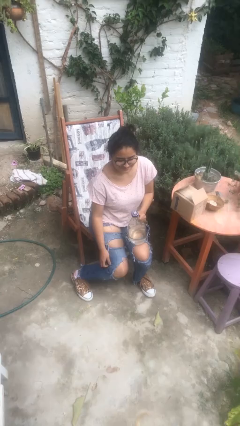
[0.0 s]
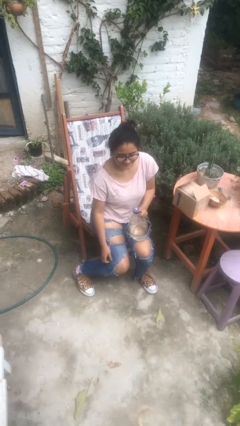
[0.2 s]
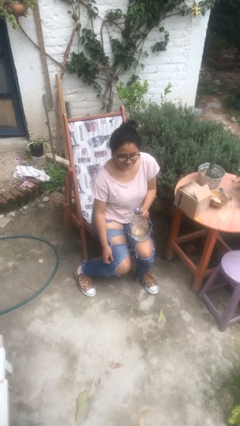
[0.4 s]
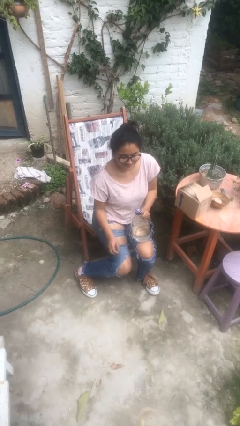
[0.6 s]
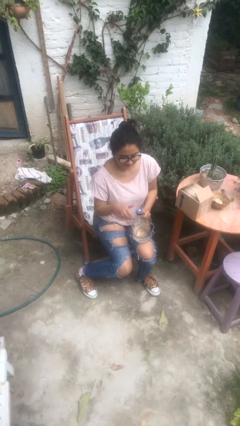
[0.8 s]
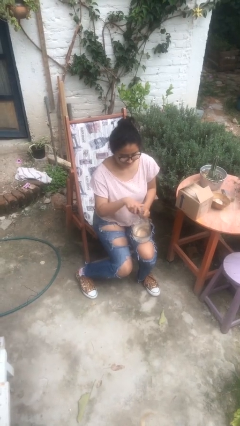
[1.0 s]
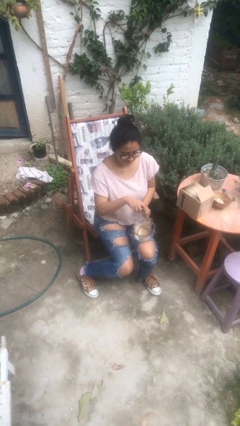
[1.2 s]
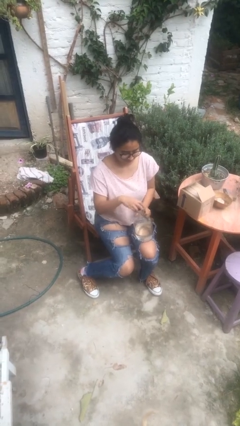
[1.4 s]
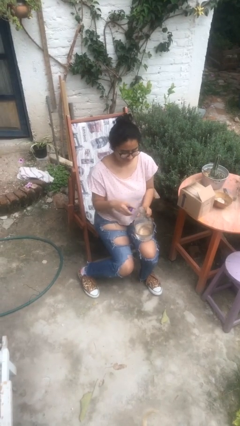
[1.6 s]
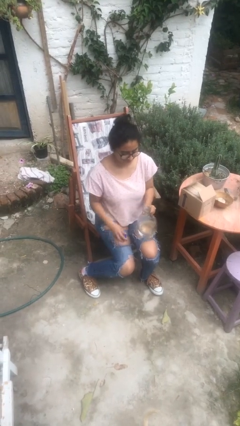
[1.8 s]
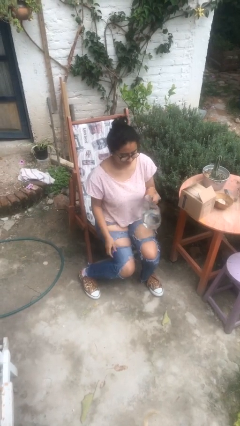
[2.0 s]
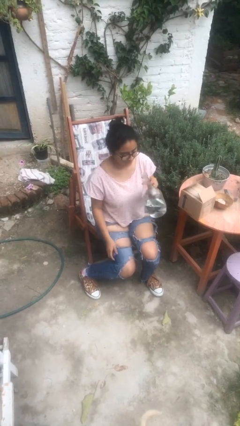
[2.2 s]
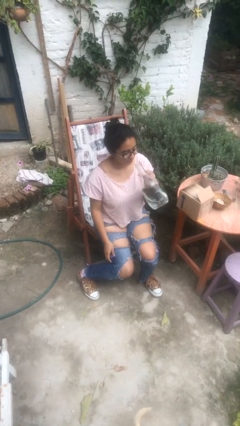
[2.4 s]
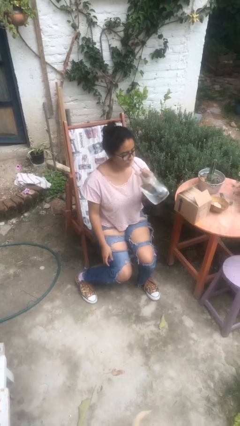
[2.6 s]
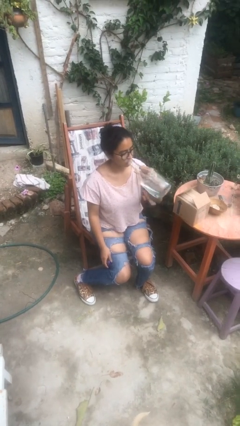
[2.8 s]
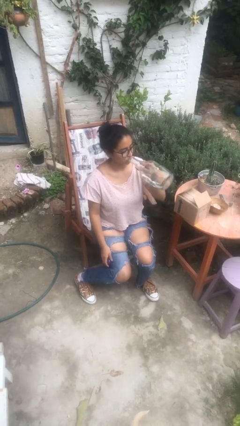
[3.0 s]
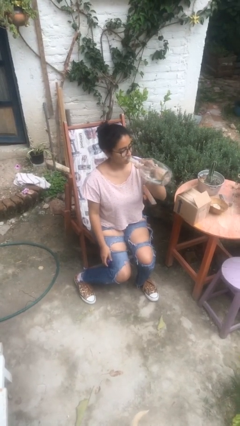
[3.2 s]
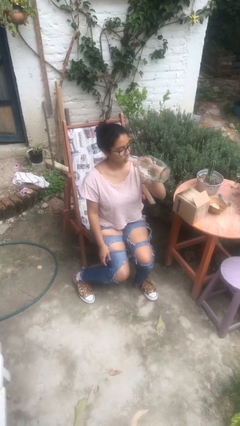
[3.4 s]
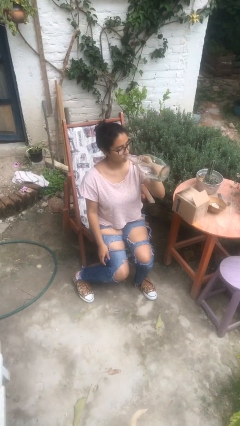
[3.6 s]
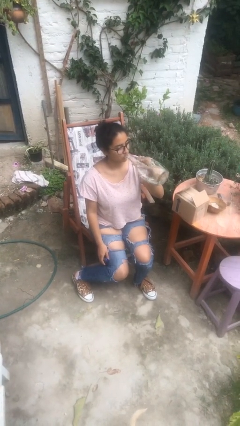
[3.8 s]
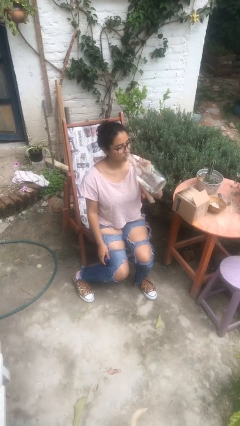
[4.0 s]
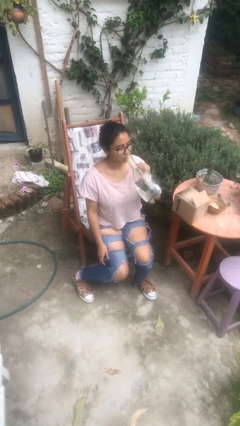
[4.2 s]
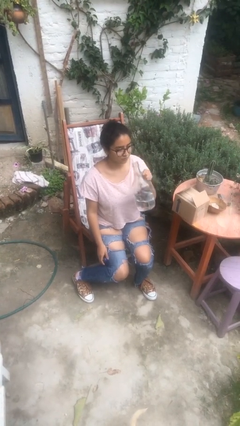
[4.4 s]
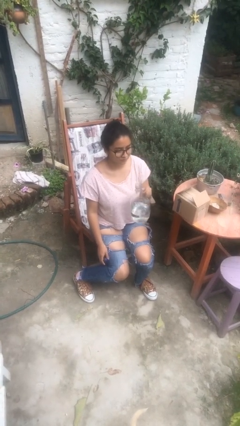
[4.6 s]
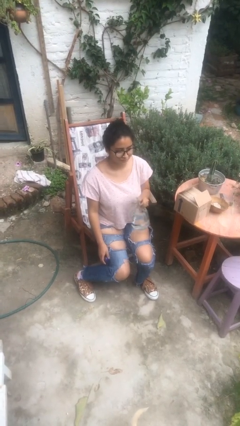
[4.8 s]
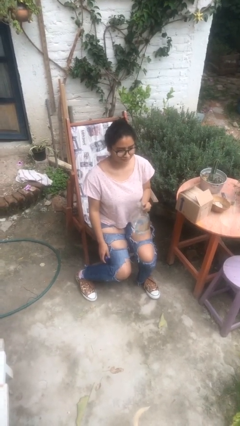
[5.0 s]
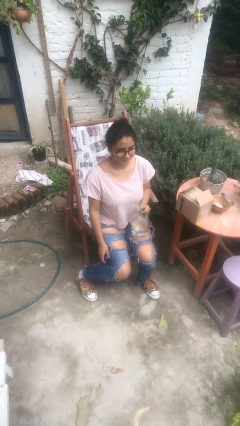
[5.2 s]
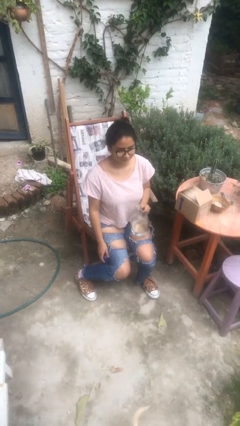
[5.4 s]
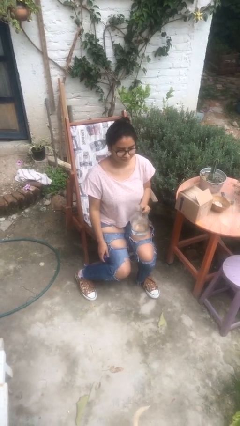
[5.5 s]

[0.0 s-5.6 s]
person drinks from bottle

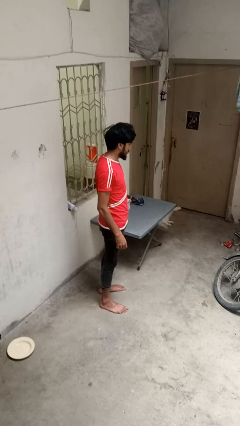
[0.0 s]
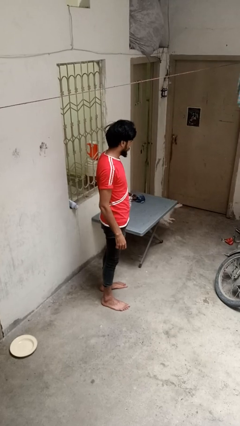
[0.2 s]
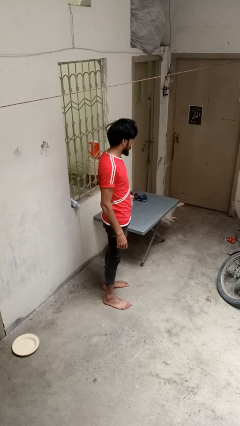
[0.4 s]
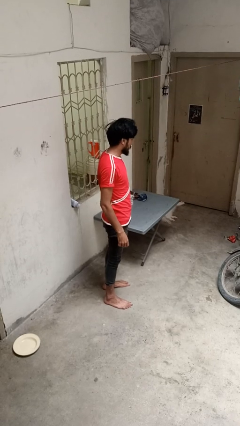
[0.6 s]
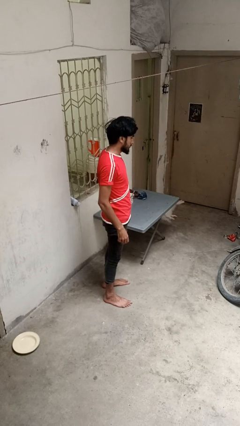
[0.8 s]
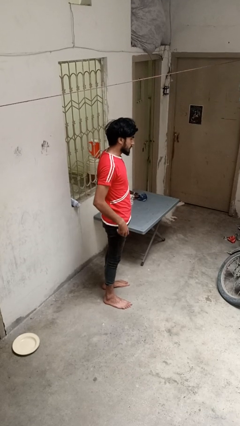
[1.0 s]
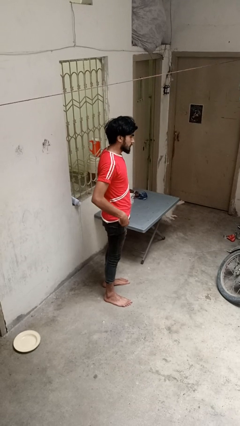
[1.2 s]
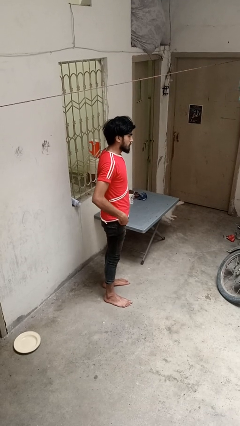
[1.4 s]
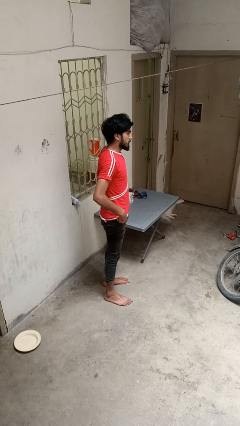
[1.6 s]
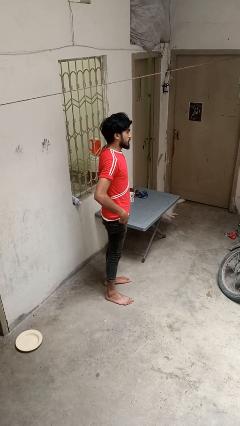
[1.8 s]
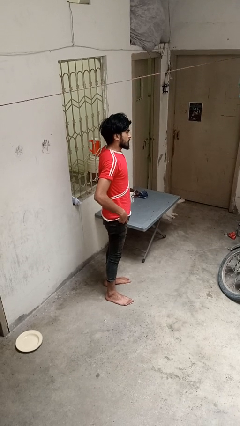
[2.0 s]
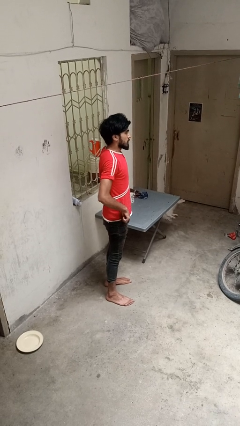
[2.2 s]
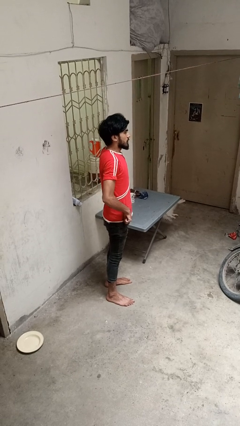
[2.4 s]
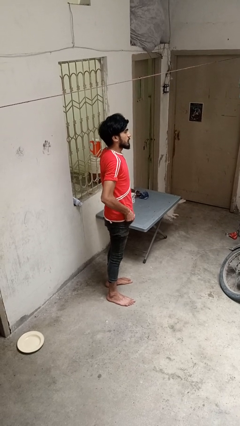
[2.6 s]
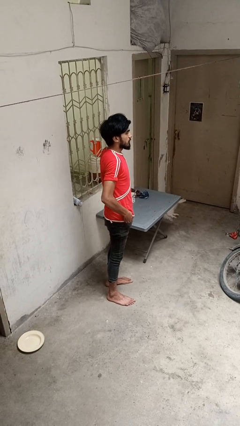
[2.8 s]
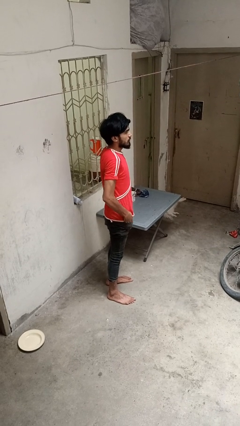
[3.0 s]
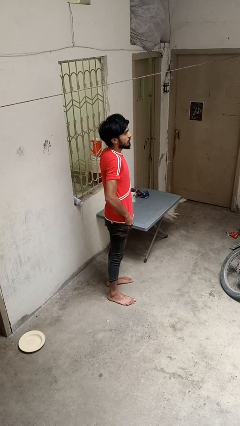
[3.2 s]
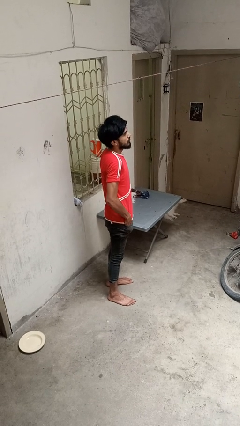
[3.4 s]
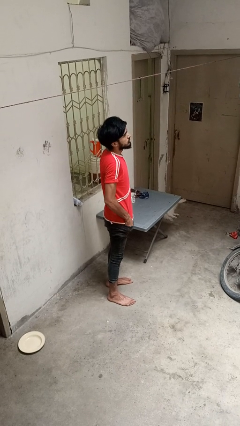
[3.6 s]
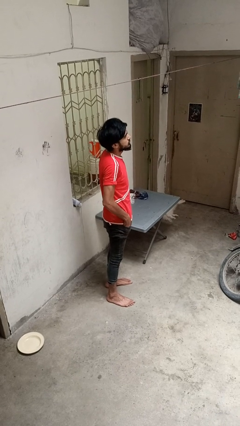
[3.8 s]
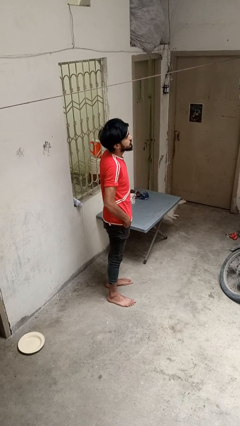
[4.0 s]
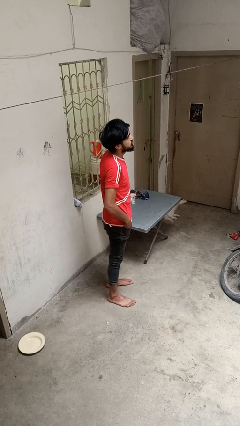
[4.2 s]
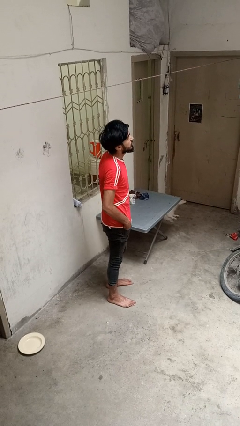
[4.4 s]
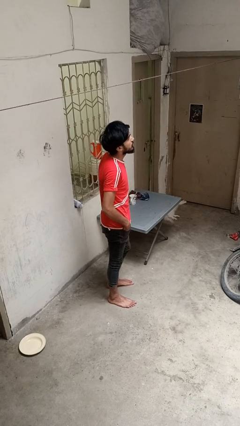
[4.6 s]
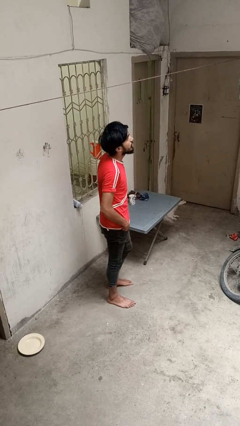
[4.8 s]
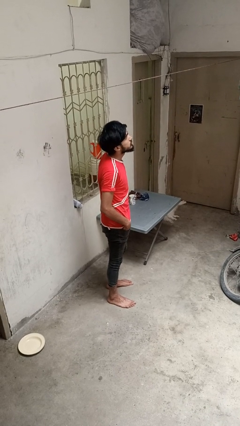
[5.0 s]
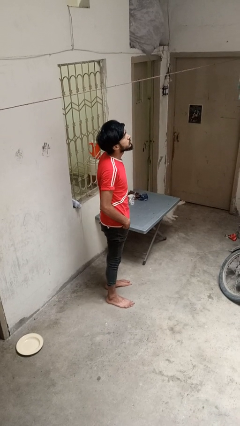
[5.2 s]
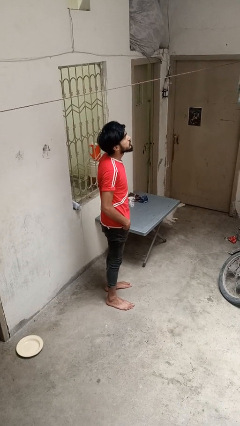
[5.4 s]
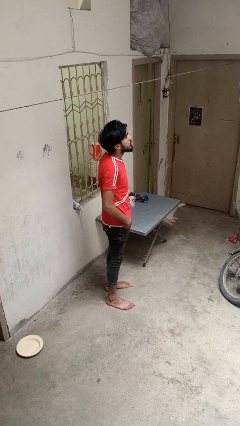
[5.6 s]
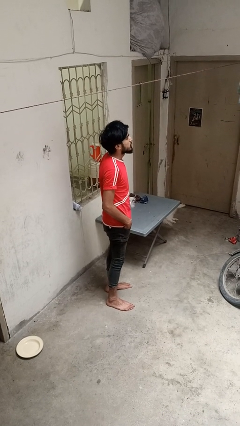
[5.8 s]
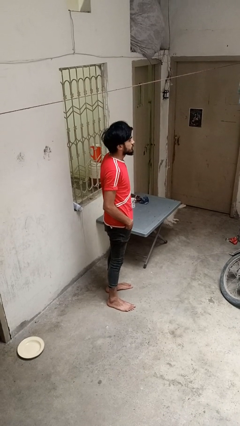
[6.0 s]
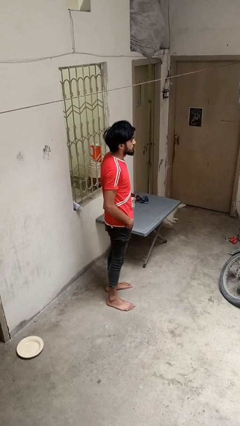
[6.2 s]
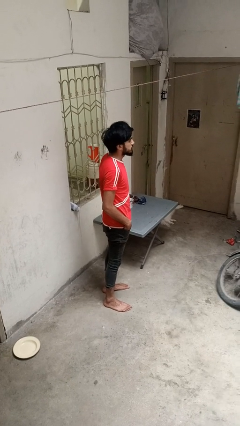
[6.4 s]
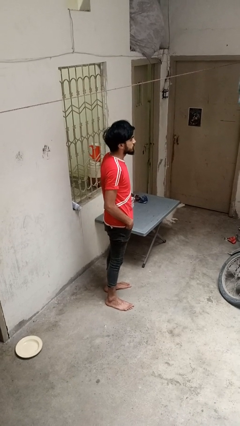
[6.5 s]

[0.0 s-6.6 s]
person puts hands in back pockets

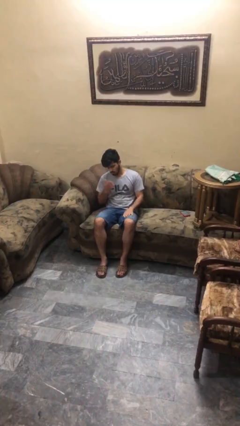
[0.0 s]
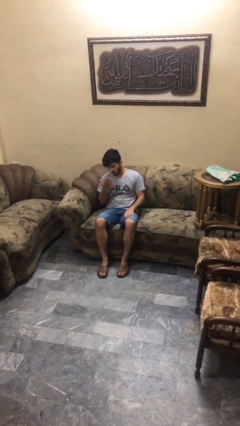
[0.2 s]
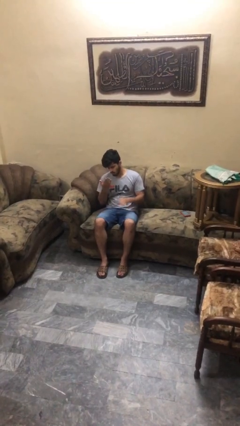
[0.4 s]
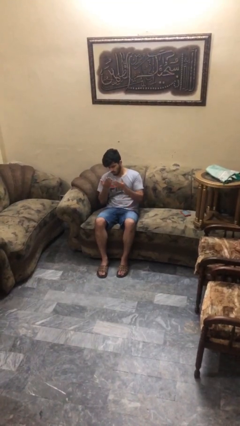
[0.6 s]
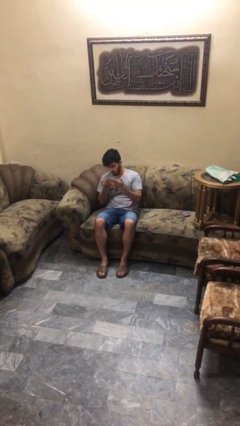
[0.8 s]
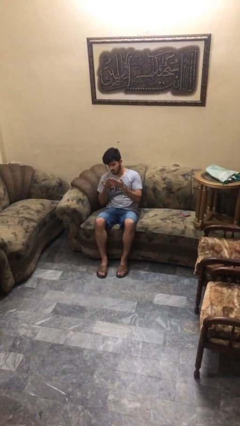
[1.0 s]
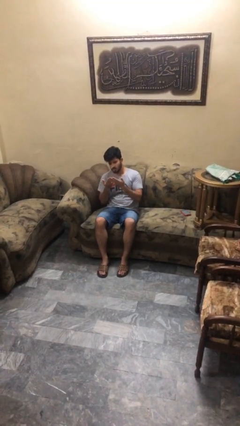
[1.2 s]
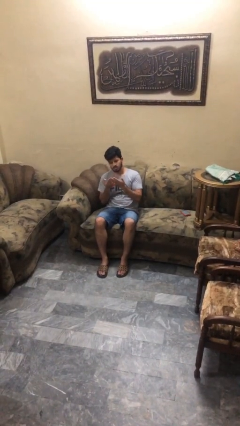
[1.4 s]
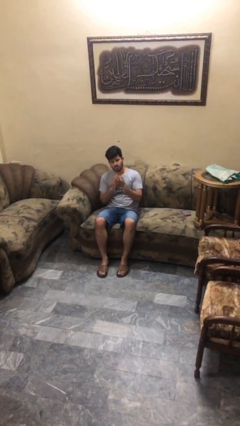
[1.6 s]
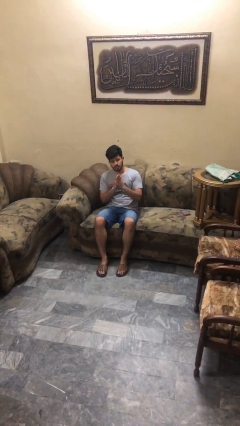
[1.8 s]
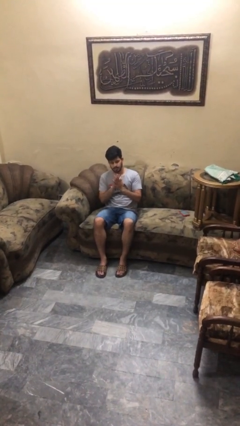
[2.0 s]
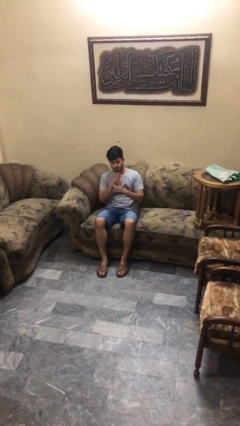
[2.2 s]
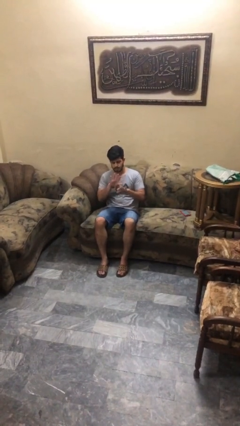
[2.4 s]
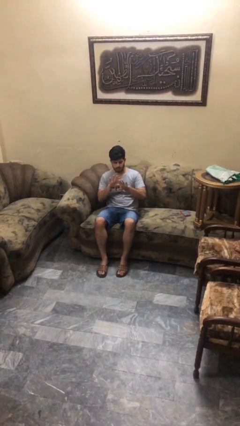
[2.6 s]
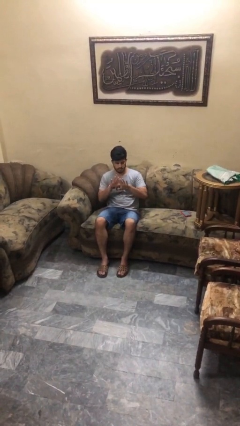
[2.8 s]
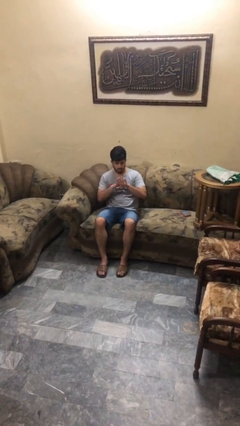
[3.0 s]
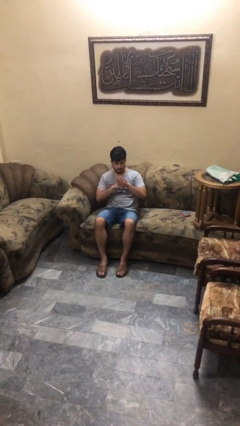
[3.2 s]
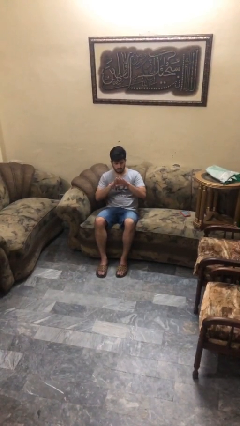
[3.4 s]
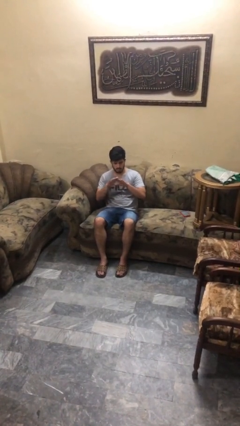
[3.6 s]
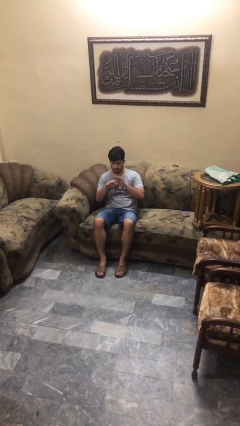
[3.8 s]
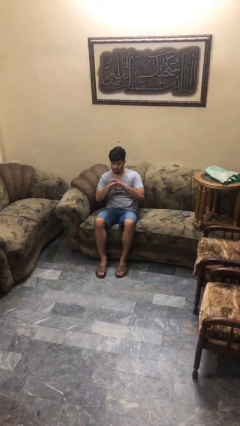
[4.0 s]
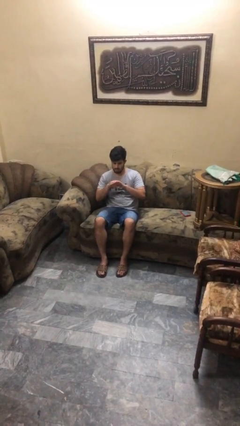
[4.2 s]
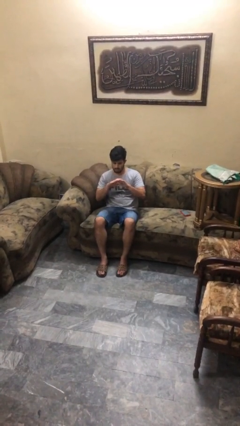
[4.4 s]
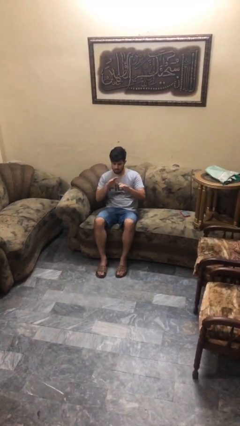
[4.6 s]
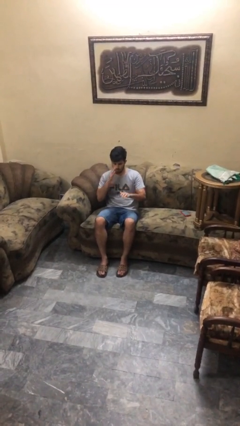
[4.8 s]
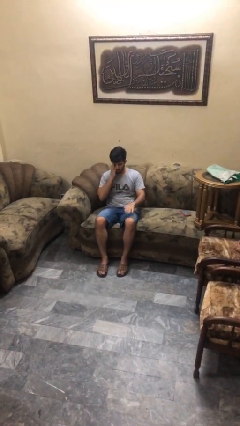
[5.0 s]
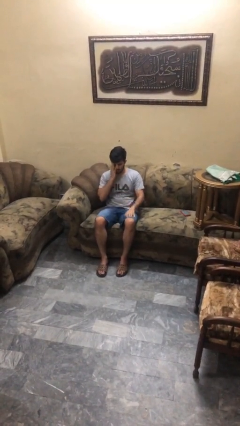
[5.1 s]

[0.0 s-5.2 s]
person looks at hands in lap

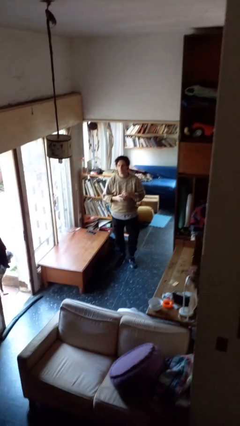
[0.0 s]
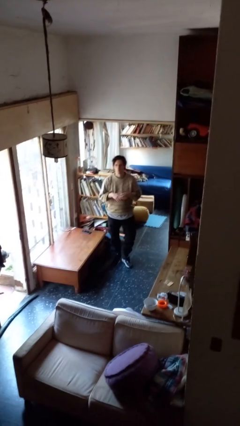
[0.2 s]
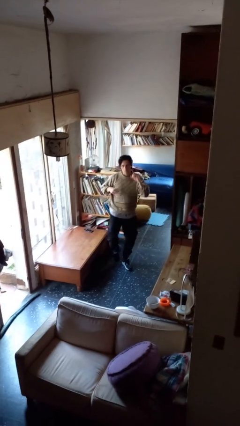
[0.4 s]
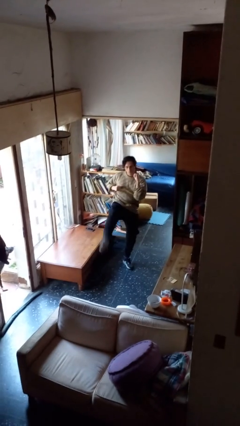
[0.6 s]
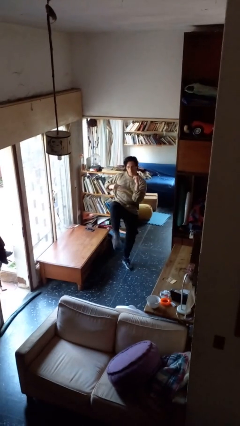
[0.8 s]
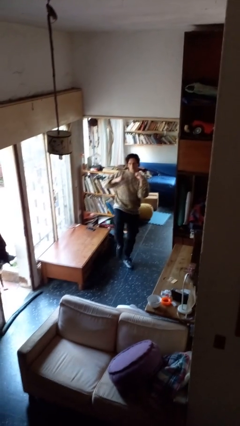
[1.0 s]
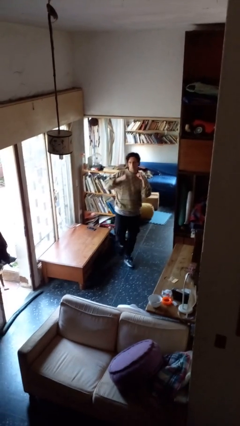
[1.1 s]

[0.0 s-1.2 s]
person karate kicks
